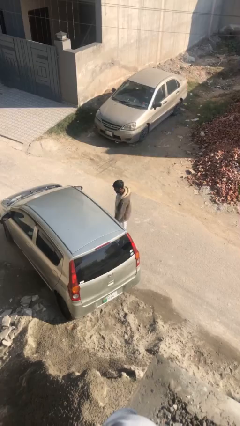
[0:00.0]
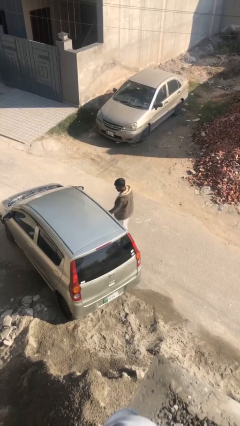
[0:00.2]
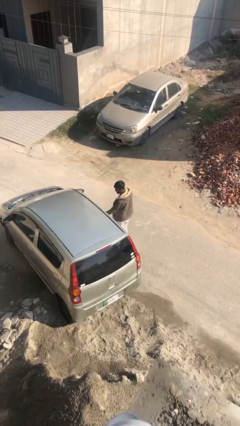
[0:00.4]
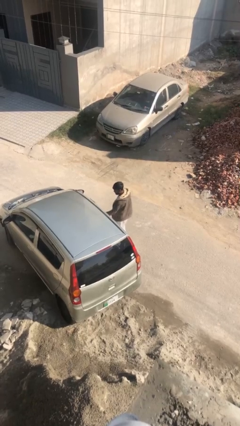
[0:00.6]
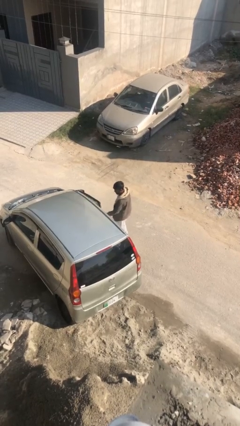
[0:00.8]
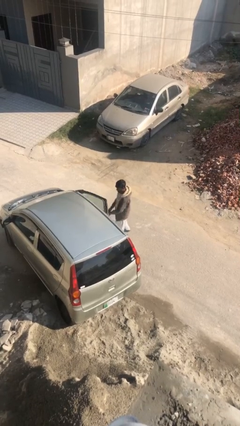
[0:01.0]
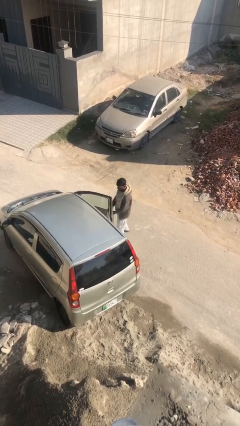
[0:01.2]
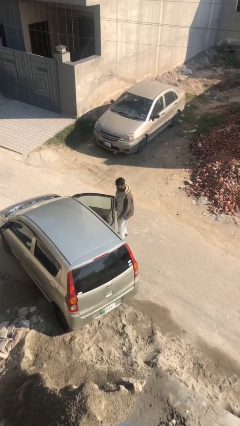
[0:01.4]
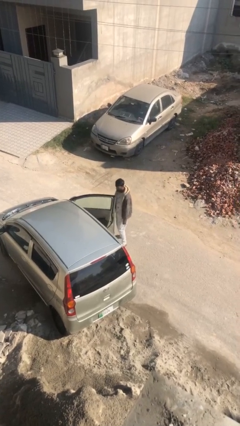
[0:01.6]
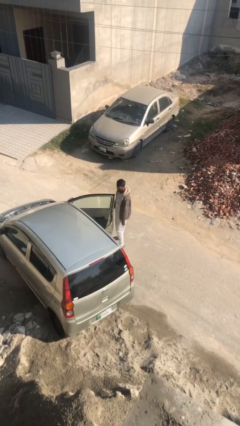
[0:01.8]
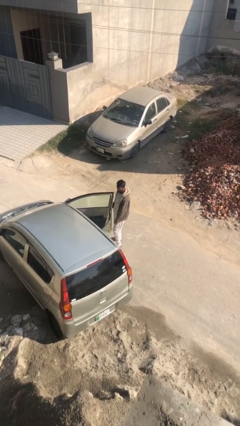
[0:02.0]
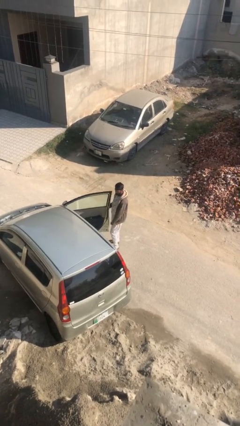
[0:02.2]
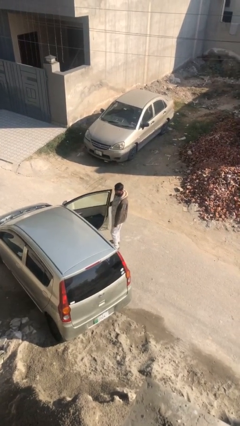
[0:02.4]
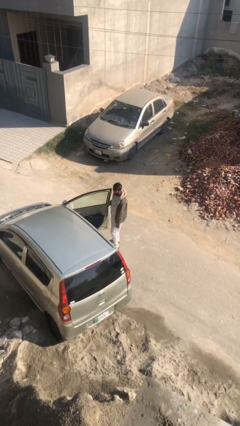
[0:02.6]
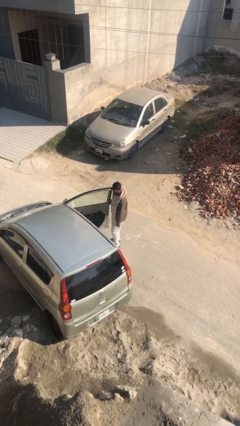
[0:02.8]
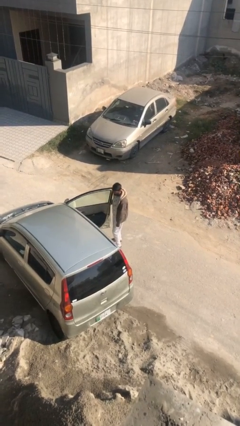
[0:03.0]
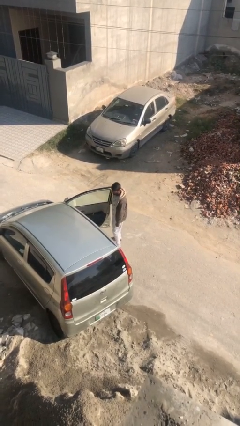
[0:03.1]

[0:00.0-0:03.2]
person opens car door

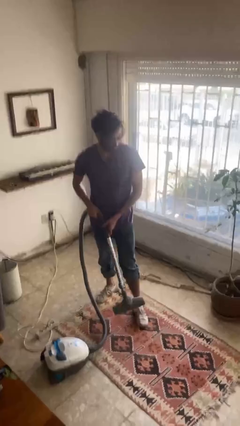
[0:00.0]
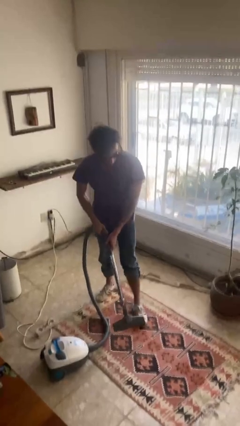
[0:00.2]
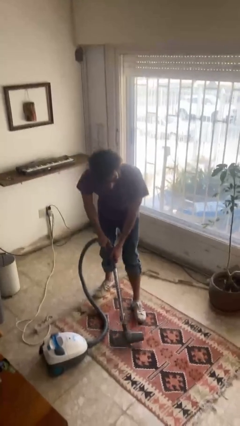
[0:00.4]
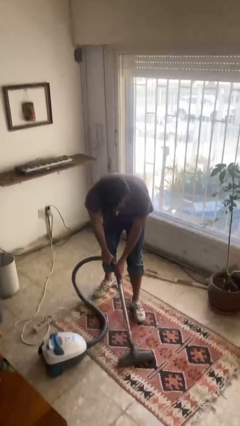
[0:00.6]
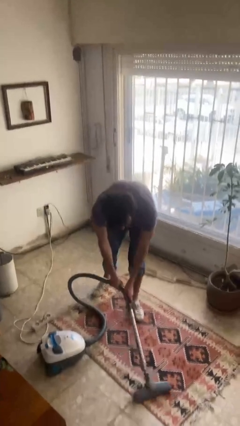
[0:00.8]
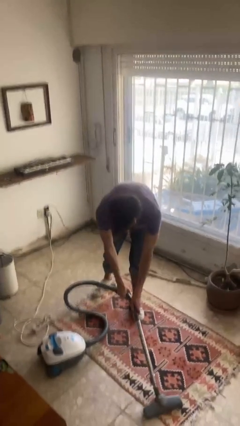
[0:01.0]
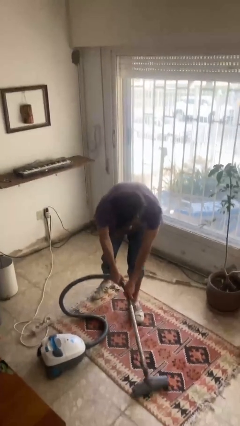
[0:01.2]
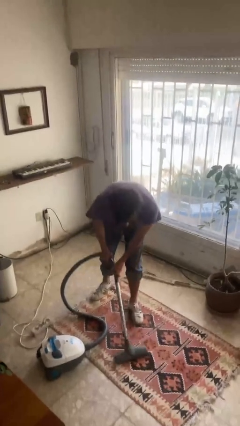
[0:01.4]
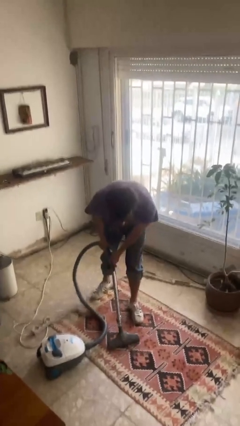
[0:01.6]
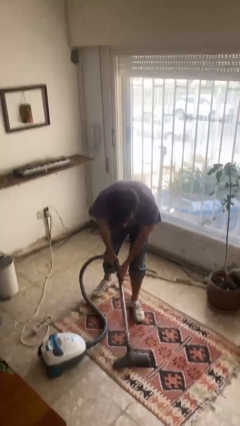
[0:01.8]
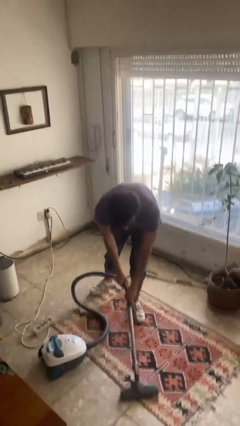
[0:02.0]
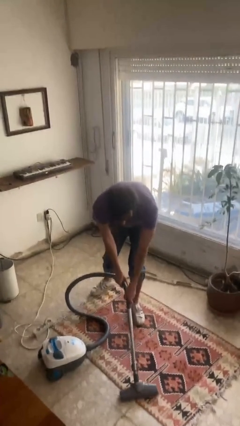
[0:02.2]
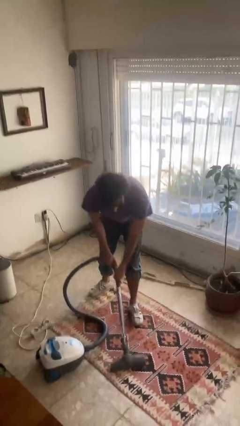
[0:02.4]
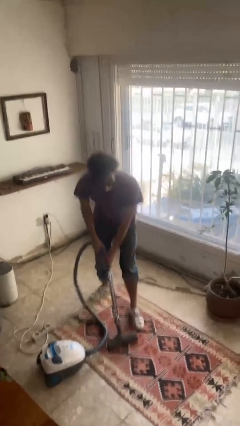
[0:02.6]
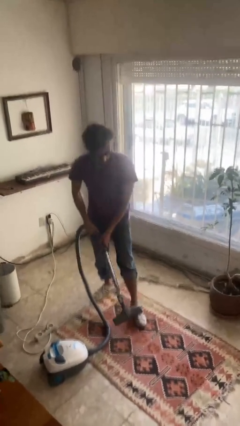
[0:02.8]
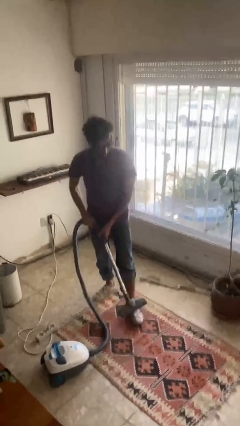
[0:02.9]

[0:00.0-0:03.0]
person vacuums carpet

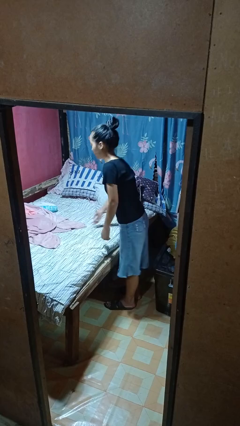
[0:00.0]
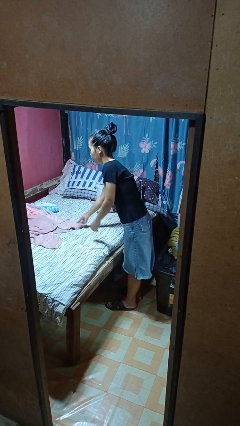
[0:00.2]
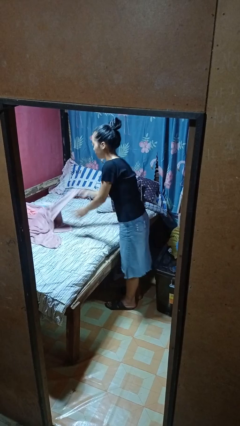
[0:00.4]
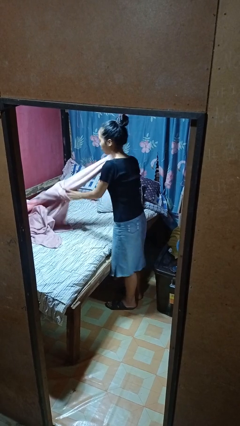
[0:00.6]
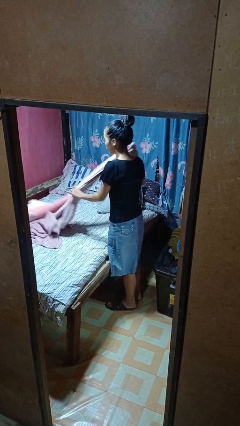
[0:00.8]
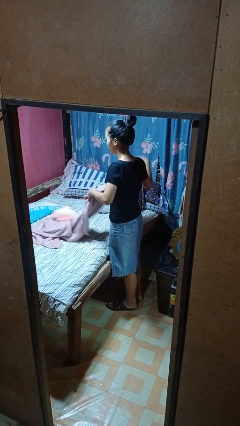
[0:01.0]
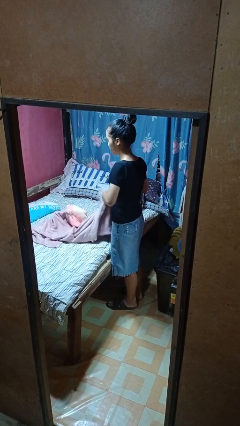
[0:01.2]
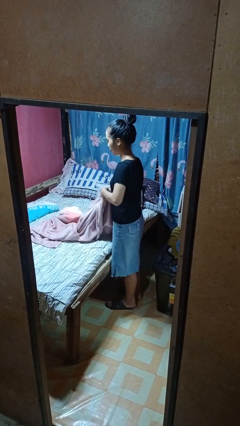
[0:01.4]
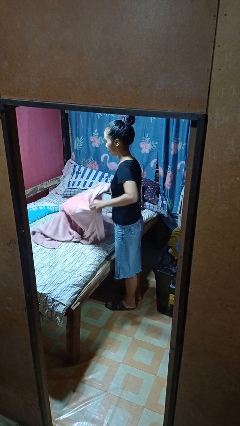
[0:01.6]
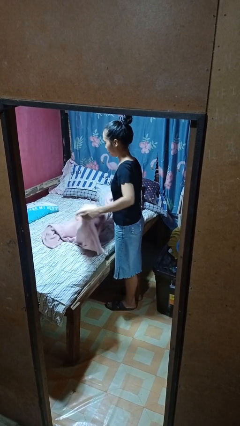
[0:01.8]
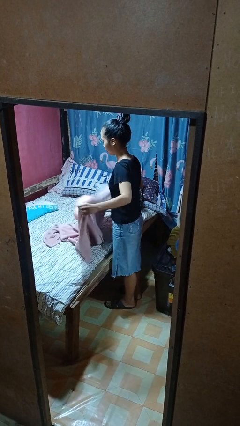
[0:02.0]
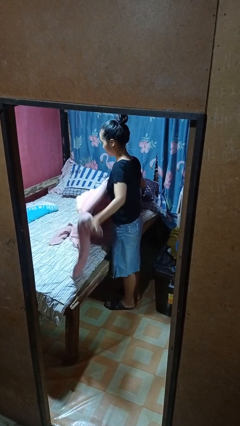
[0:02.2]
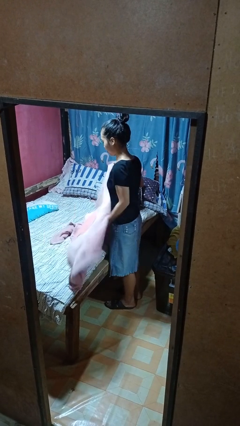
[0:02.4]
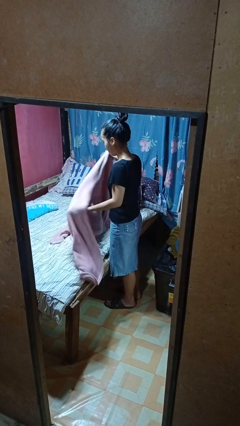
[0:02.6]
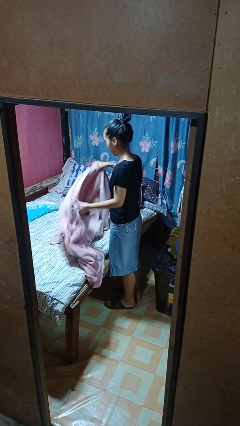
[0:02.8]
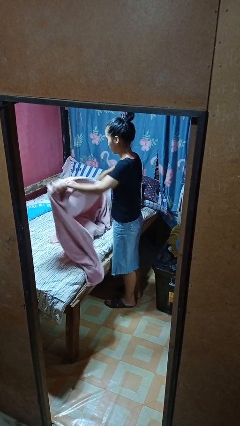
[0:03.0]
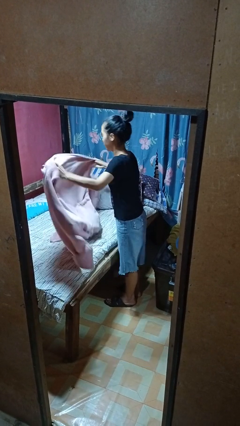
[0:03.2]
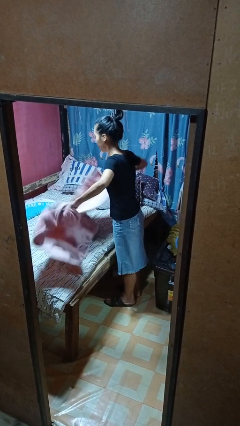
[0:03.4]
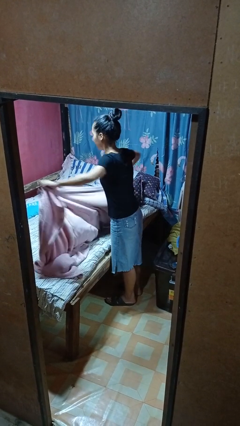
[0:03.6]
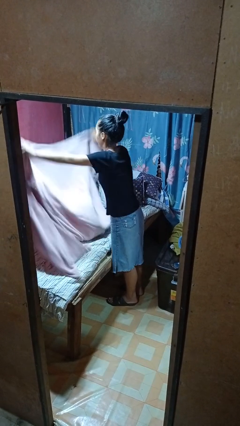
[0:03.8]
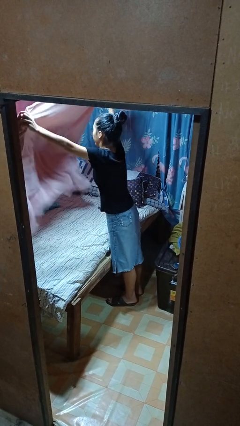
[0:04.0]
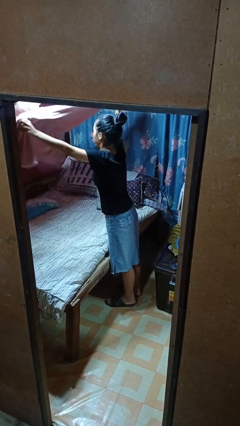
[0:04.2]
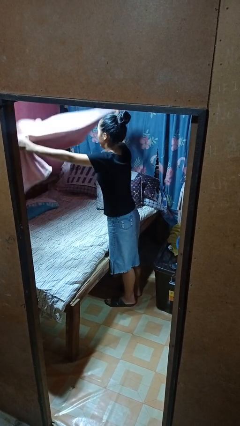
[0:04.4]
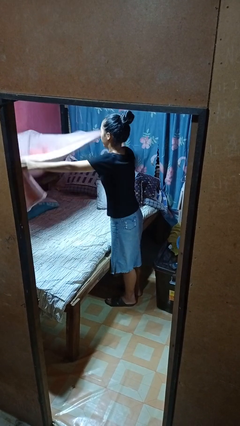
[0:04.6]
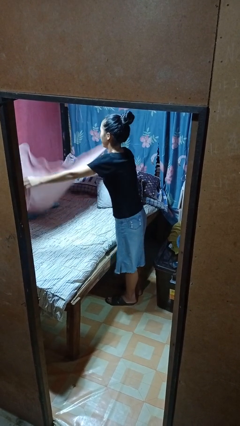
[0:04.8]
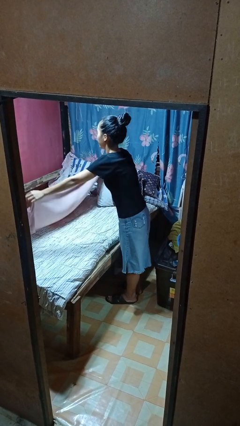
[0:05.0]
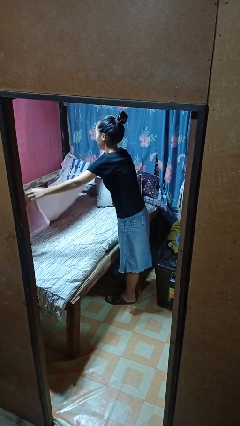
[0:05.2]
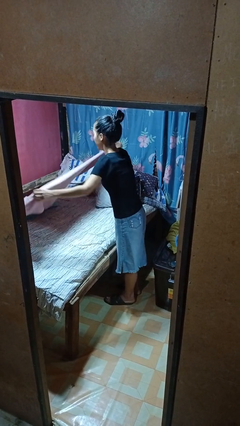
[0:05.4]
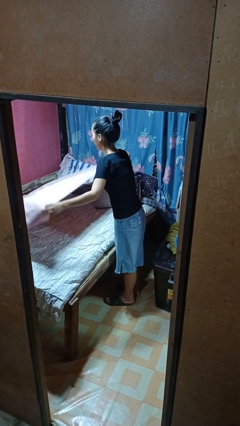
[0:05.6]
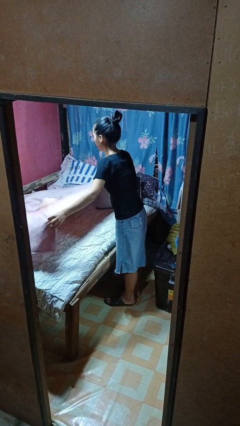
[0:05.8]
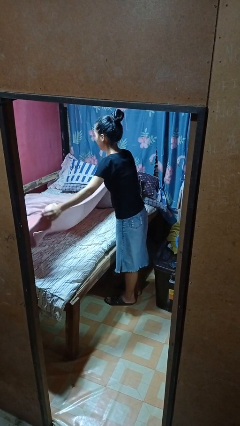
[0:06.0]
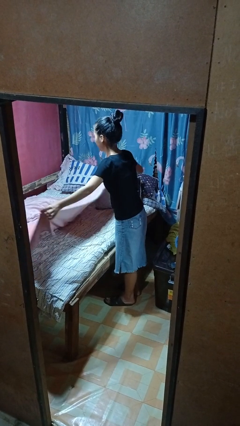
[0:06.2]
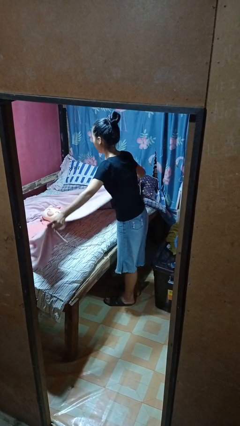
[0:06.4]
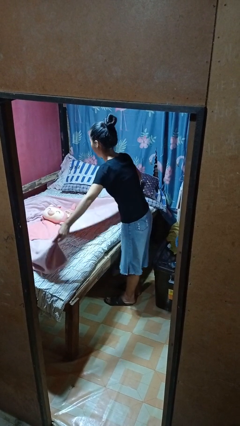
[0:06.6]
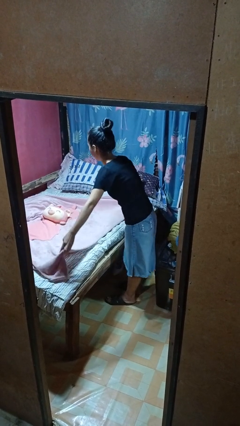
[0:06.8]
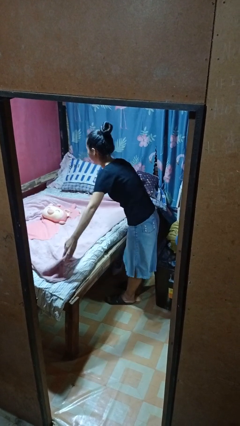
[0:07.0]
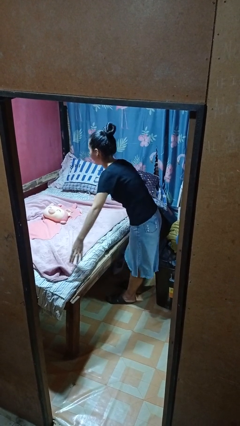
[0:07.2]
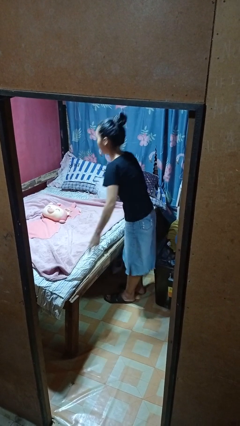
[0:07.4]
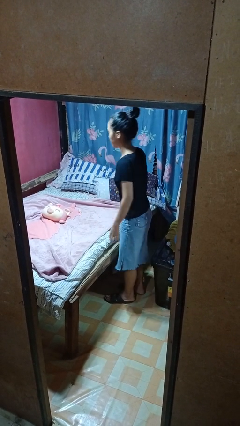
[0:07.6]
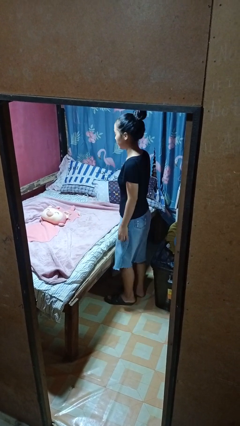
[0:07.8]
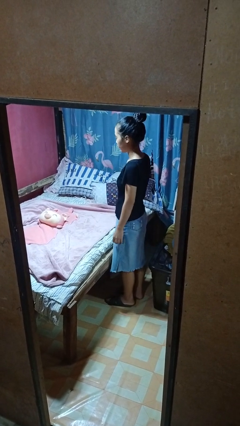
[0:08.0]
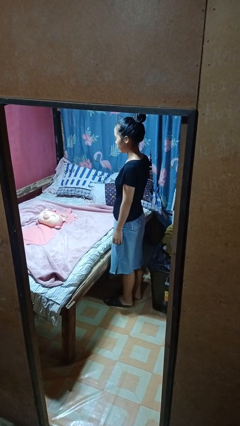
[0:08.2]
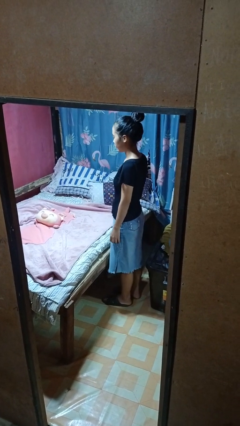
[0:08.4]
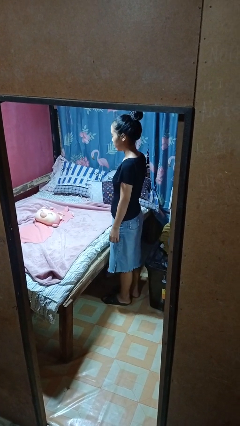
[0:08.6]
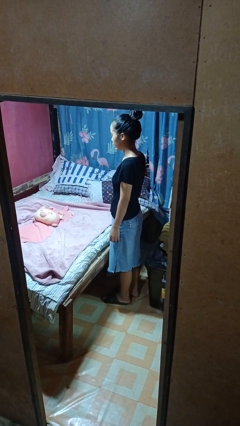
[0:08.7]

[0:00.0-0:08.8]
person makes bed

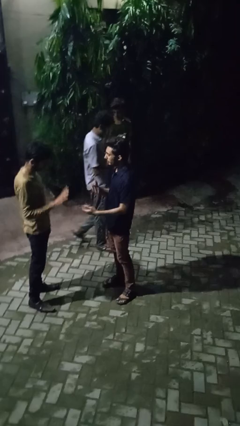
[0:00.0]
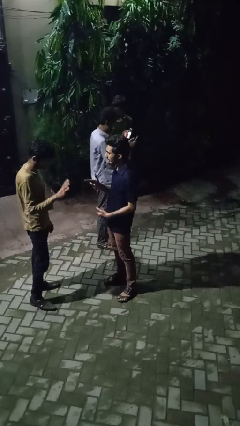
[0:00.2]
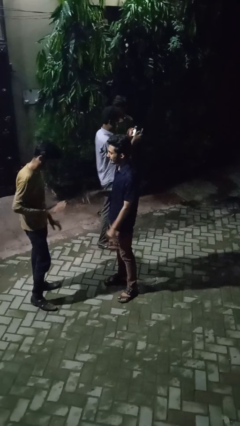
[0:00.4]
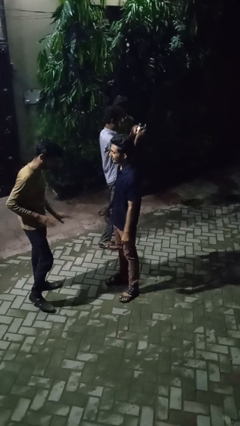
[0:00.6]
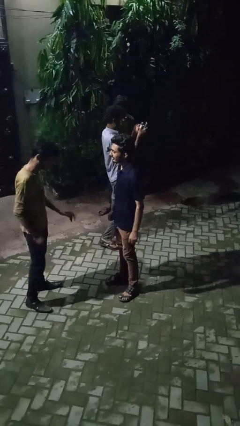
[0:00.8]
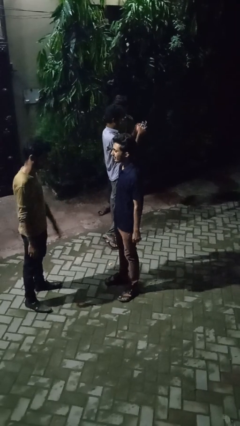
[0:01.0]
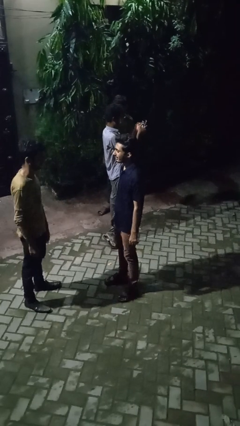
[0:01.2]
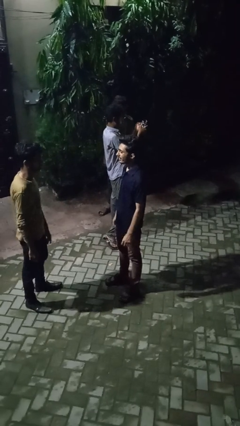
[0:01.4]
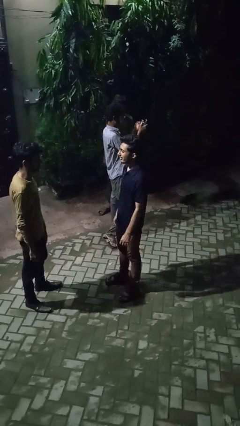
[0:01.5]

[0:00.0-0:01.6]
person talks to person

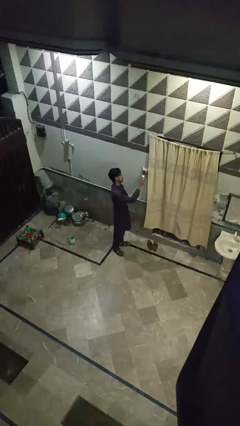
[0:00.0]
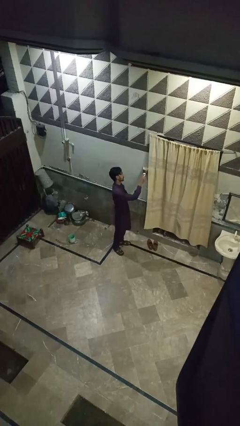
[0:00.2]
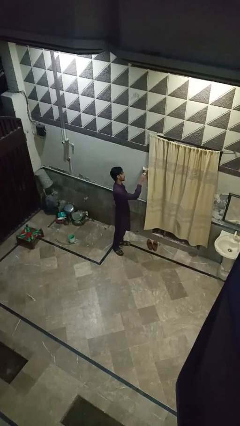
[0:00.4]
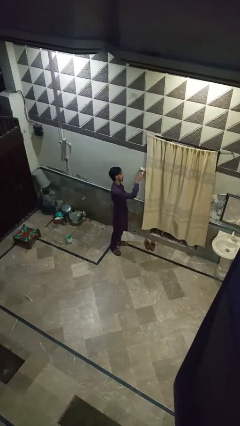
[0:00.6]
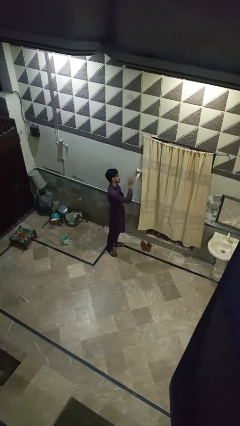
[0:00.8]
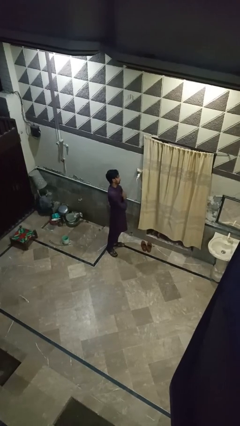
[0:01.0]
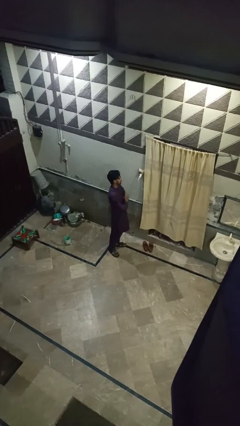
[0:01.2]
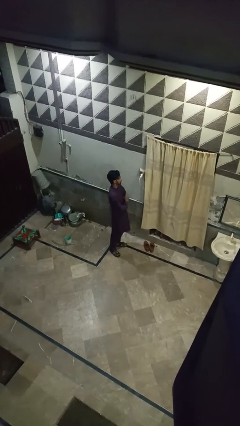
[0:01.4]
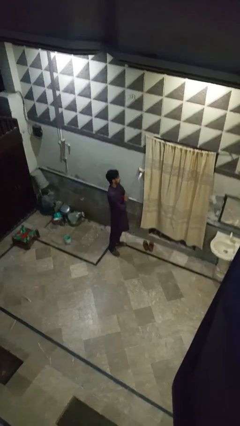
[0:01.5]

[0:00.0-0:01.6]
person plugs into electrical socket
